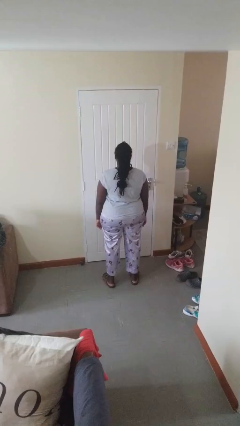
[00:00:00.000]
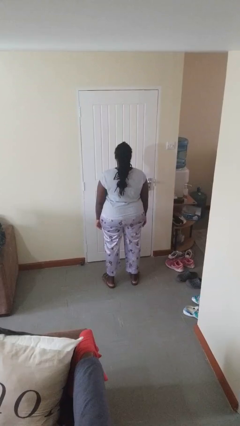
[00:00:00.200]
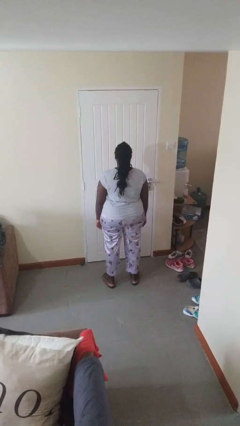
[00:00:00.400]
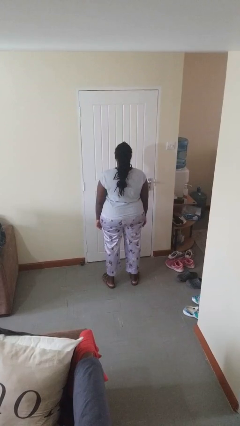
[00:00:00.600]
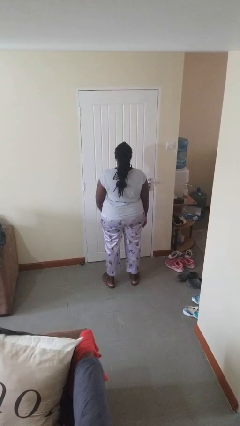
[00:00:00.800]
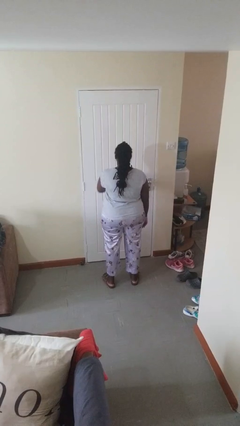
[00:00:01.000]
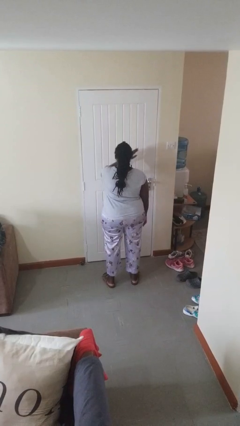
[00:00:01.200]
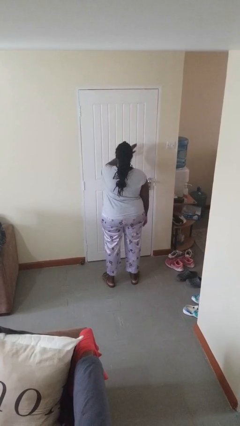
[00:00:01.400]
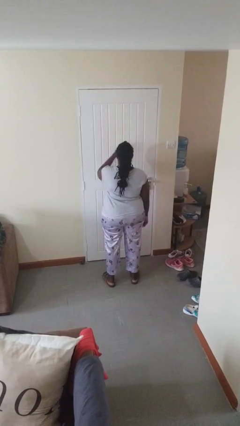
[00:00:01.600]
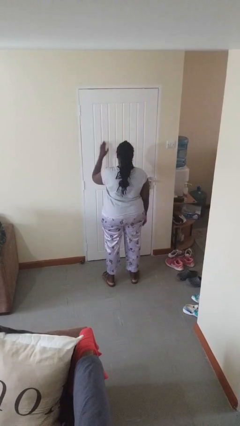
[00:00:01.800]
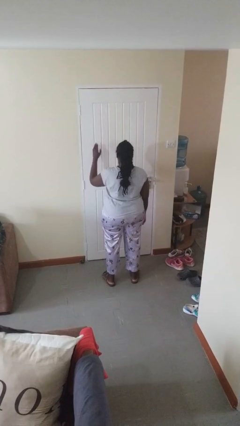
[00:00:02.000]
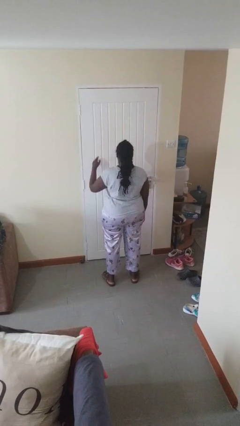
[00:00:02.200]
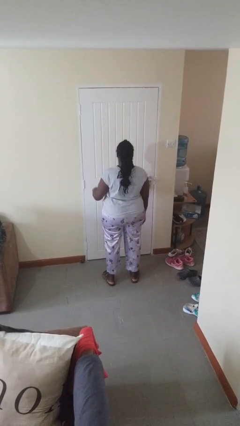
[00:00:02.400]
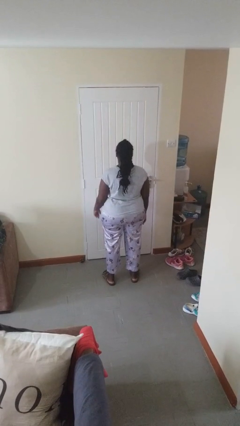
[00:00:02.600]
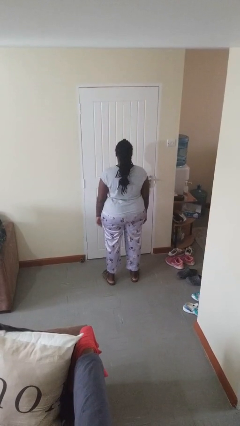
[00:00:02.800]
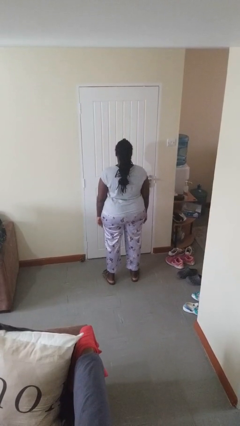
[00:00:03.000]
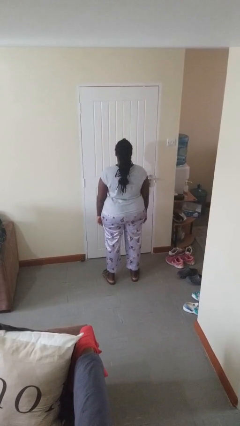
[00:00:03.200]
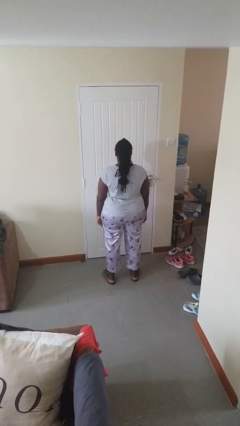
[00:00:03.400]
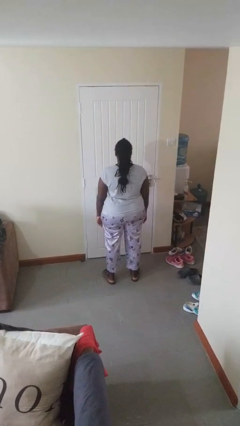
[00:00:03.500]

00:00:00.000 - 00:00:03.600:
person gestures swipe left

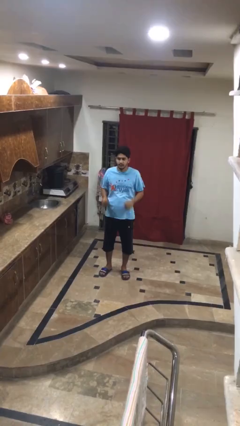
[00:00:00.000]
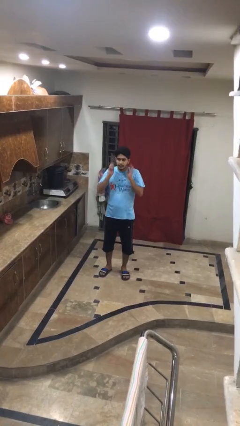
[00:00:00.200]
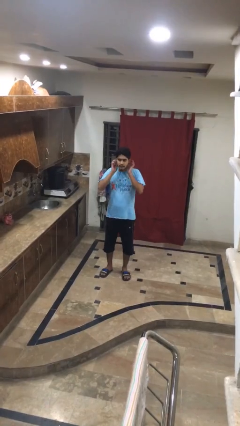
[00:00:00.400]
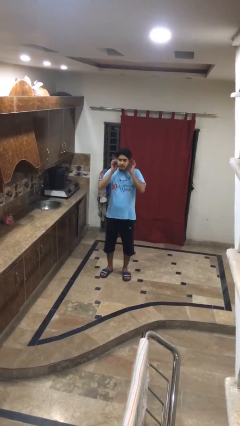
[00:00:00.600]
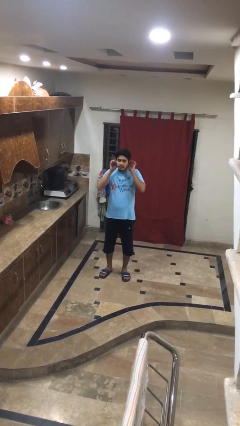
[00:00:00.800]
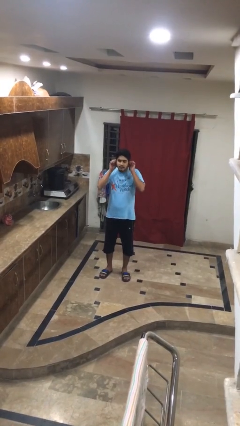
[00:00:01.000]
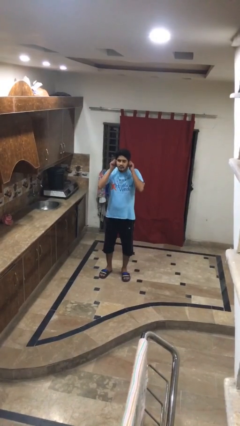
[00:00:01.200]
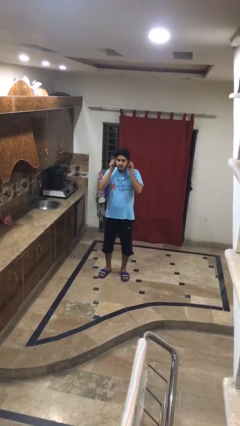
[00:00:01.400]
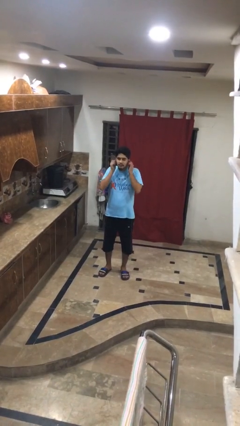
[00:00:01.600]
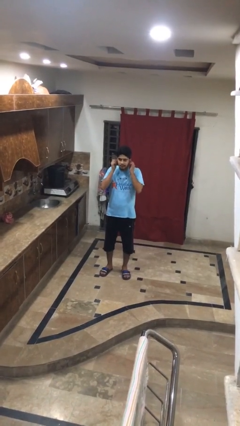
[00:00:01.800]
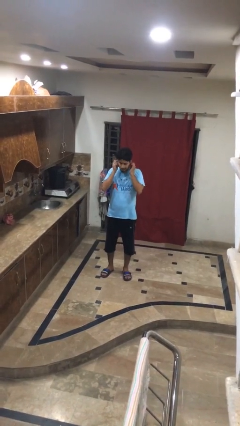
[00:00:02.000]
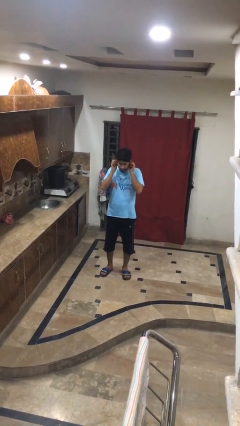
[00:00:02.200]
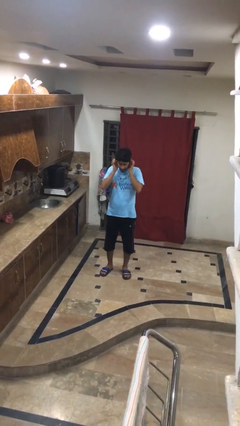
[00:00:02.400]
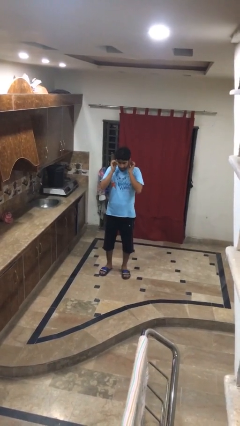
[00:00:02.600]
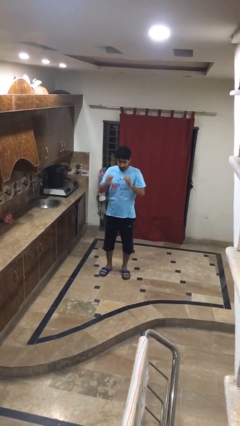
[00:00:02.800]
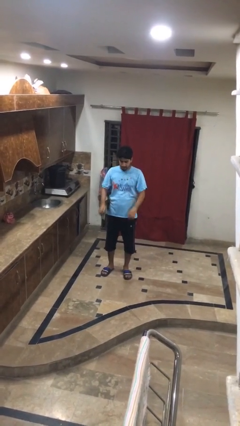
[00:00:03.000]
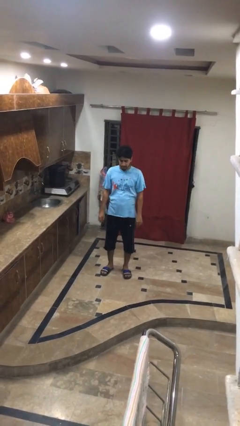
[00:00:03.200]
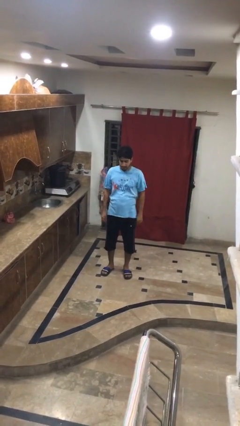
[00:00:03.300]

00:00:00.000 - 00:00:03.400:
person touches earlobe

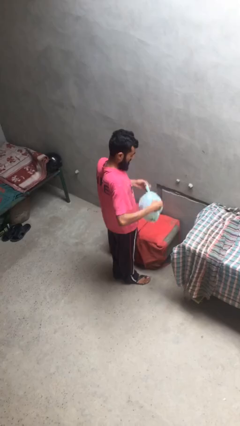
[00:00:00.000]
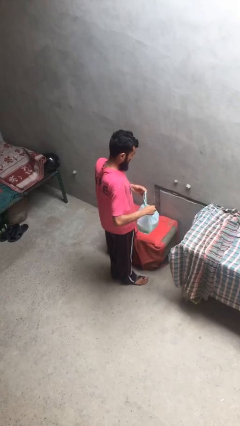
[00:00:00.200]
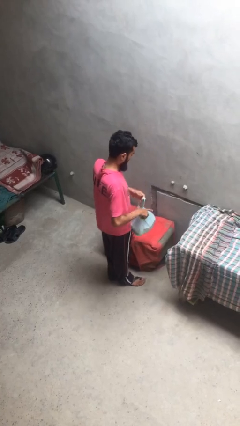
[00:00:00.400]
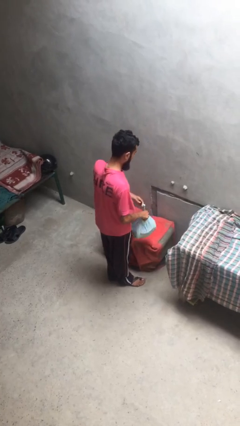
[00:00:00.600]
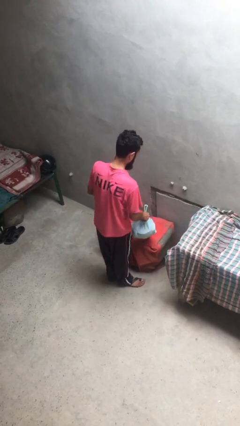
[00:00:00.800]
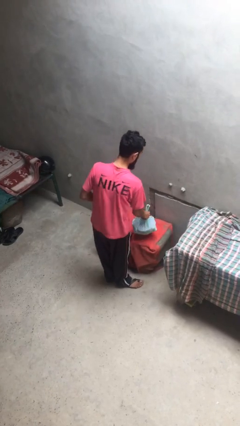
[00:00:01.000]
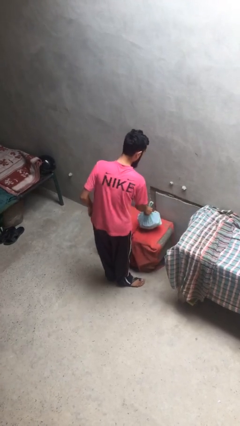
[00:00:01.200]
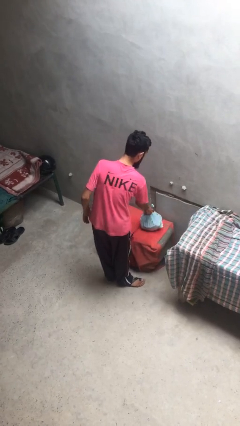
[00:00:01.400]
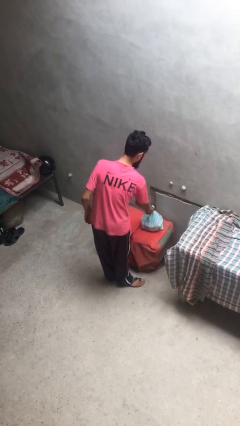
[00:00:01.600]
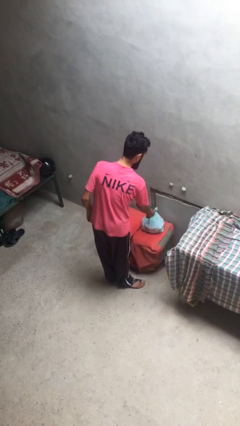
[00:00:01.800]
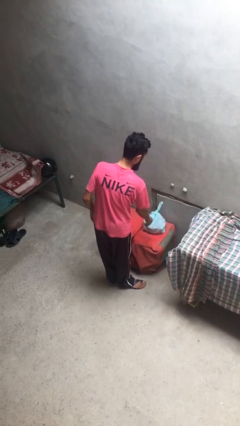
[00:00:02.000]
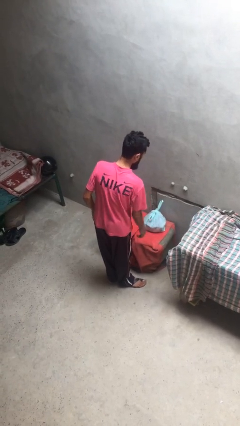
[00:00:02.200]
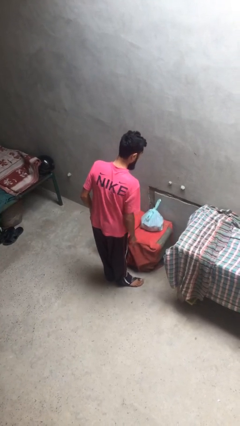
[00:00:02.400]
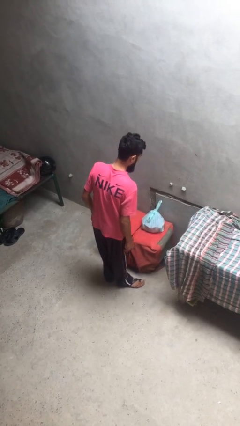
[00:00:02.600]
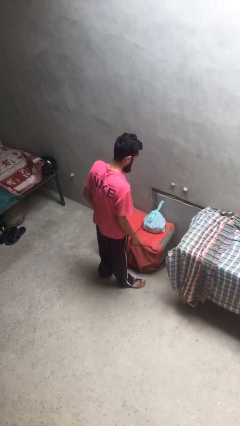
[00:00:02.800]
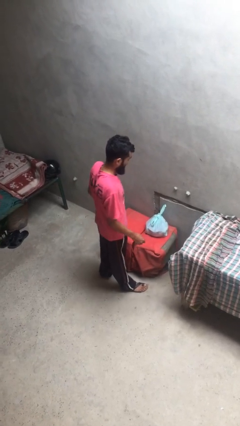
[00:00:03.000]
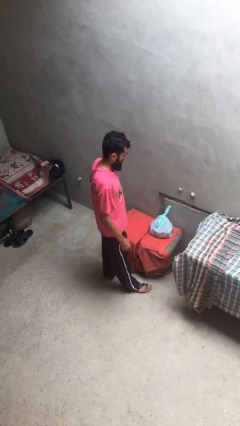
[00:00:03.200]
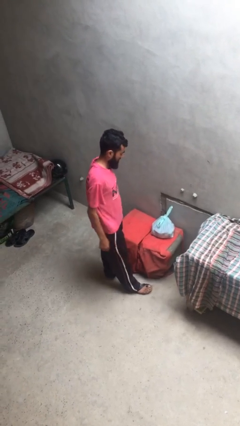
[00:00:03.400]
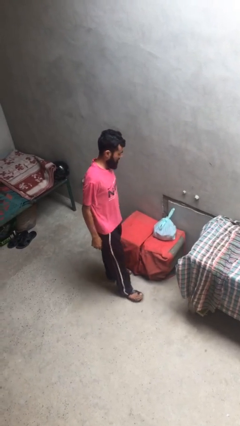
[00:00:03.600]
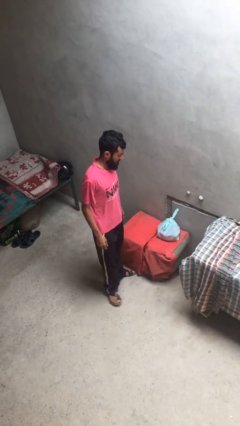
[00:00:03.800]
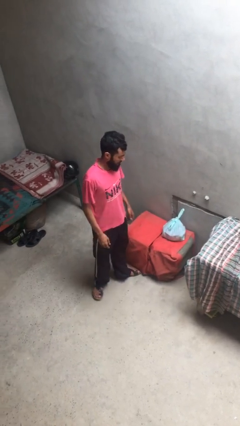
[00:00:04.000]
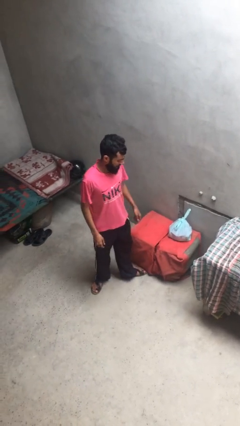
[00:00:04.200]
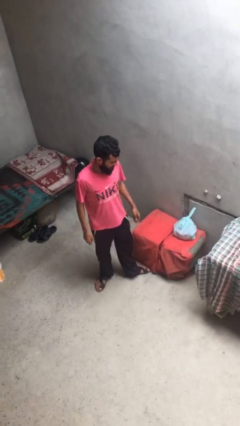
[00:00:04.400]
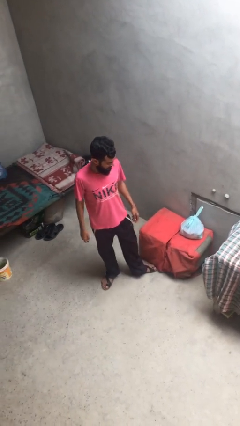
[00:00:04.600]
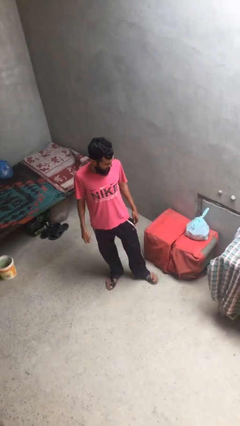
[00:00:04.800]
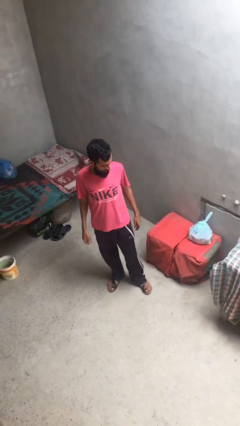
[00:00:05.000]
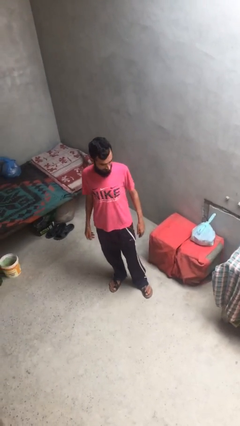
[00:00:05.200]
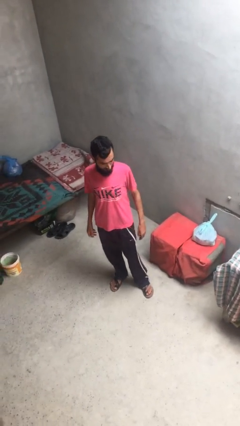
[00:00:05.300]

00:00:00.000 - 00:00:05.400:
person puts down object on table

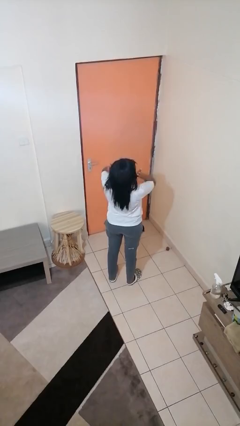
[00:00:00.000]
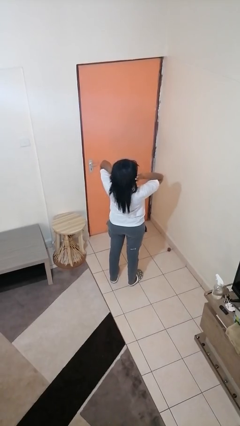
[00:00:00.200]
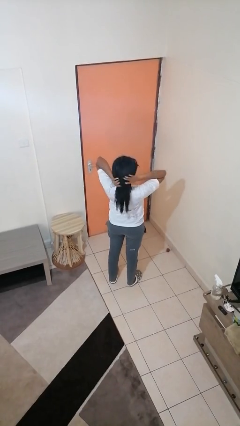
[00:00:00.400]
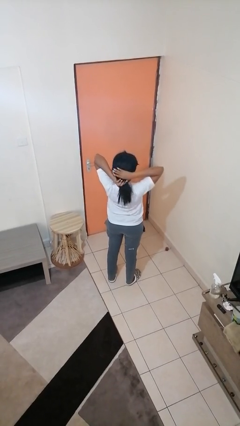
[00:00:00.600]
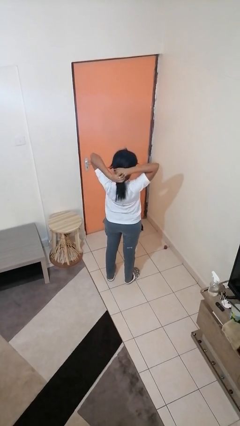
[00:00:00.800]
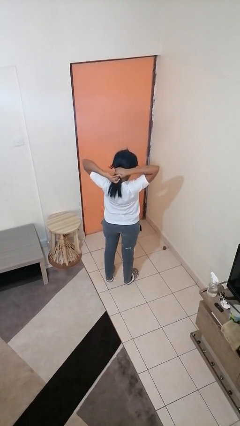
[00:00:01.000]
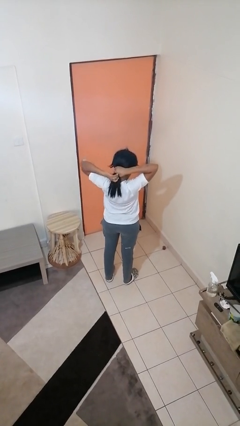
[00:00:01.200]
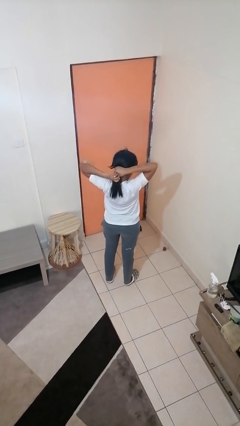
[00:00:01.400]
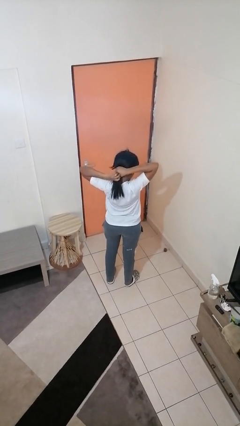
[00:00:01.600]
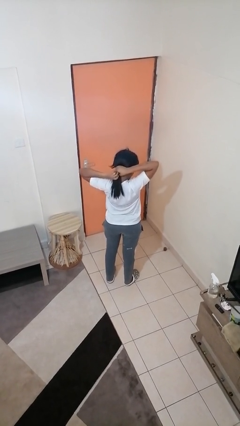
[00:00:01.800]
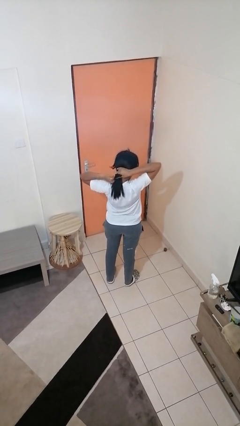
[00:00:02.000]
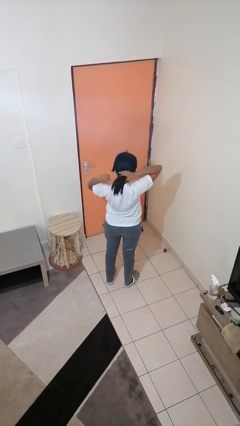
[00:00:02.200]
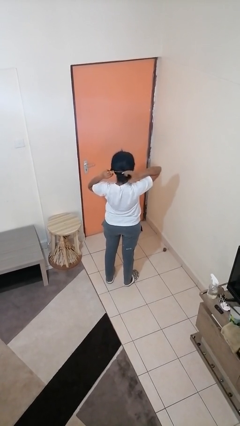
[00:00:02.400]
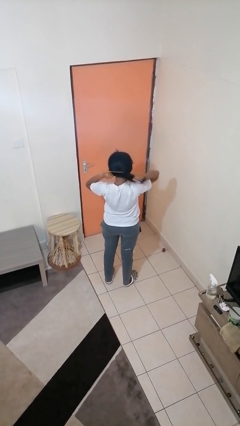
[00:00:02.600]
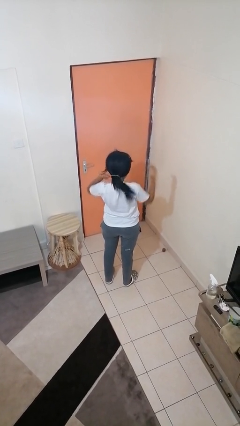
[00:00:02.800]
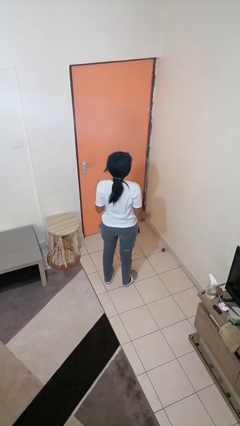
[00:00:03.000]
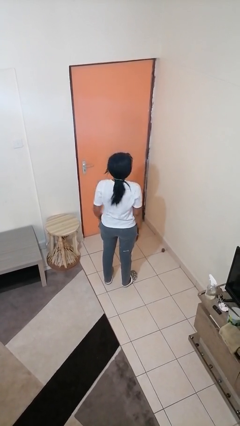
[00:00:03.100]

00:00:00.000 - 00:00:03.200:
person puts hair in ponytail

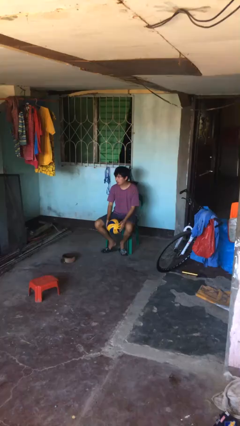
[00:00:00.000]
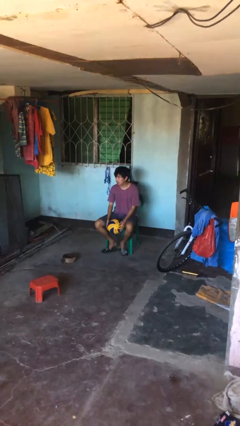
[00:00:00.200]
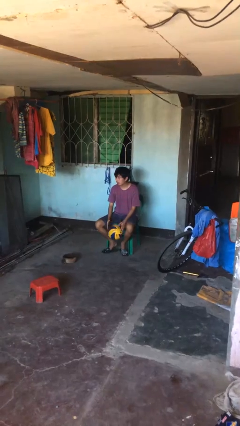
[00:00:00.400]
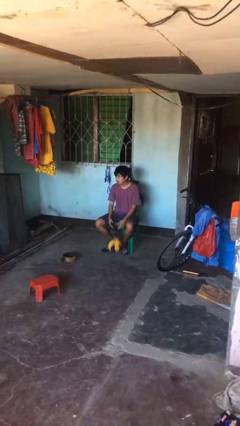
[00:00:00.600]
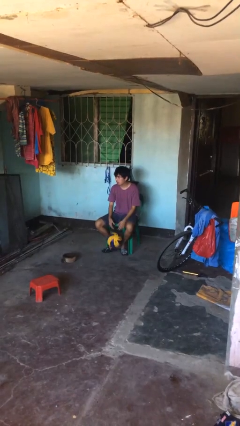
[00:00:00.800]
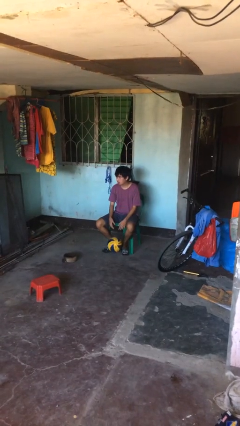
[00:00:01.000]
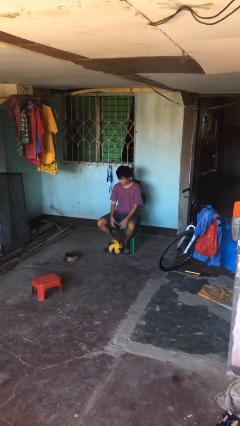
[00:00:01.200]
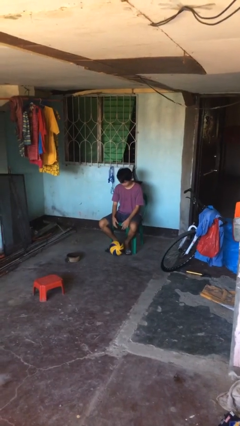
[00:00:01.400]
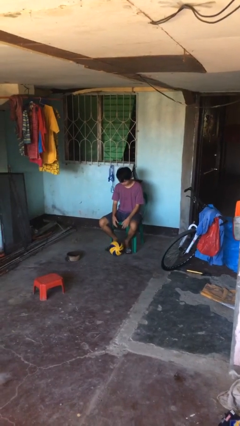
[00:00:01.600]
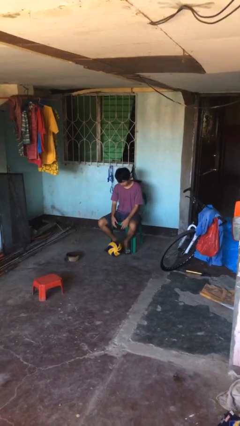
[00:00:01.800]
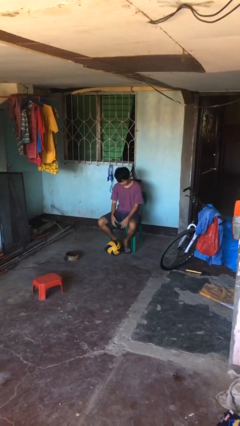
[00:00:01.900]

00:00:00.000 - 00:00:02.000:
person drops object
